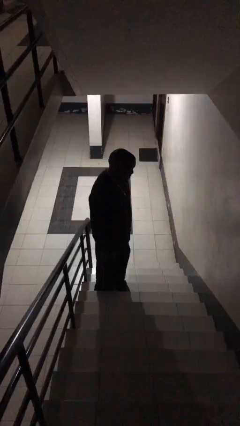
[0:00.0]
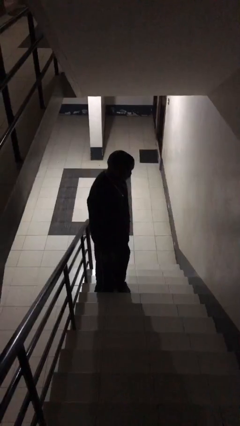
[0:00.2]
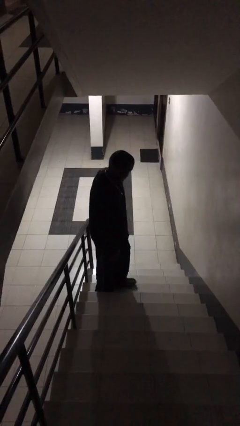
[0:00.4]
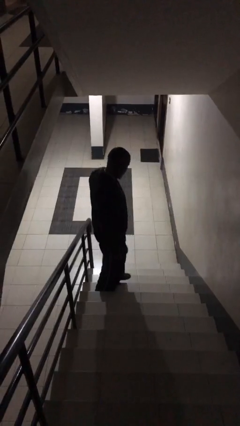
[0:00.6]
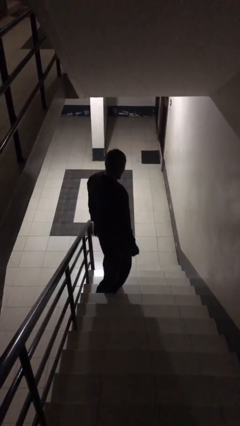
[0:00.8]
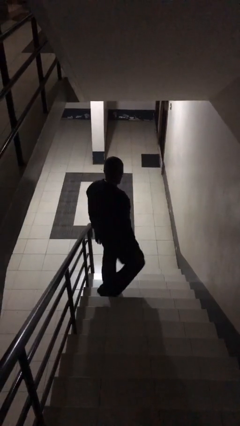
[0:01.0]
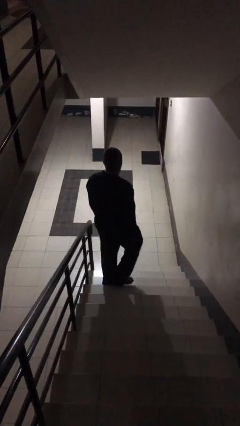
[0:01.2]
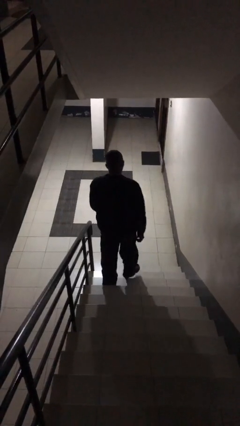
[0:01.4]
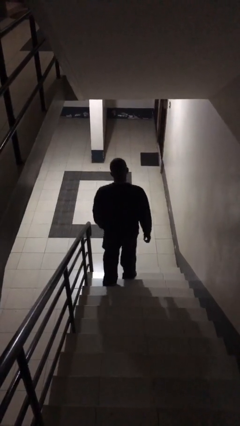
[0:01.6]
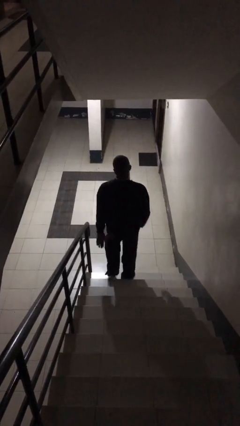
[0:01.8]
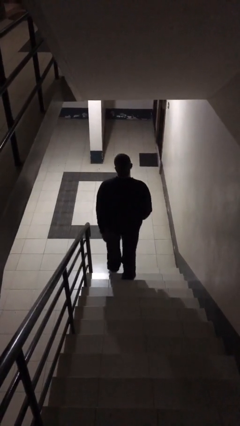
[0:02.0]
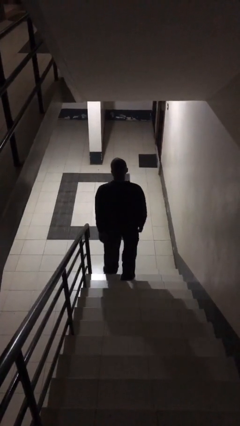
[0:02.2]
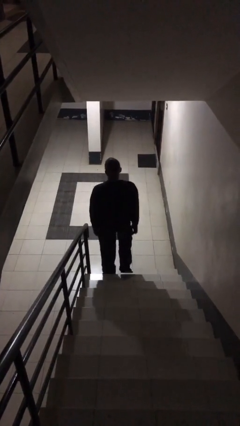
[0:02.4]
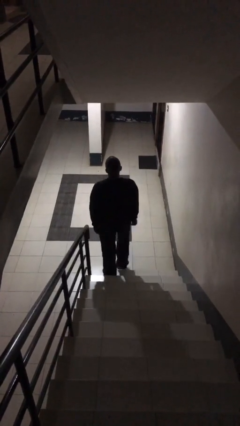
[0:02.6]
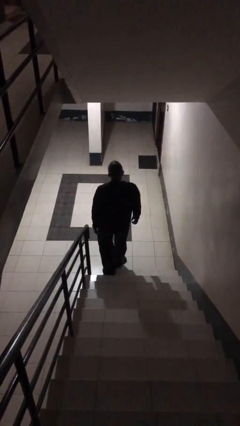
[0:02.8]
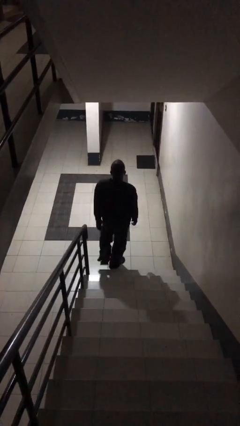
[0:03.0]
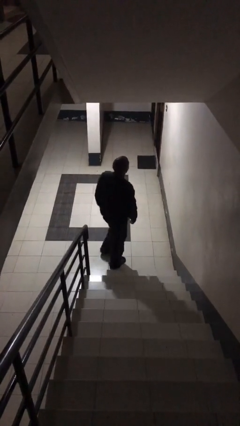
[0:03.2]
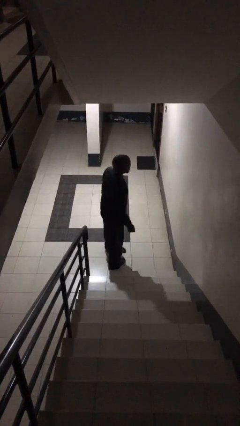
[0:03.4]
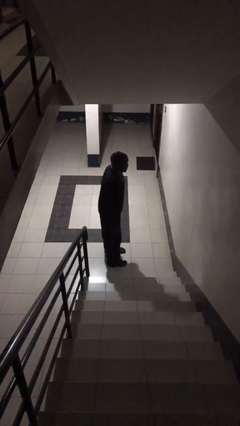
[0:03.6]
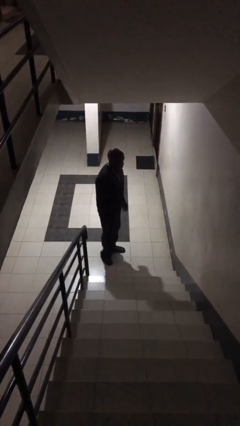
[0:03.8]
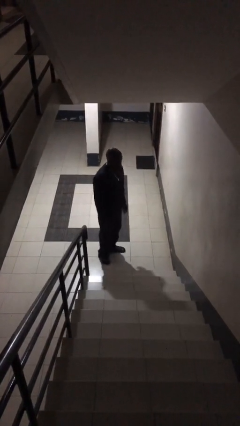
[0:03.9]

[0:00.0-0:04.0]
person climbs down stairs

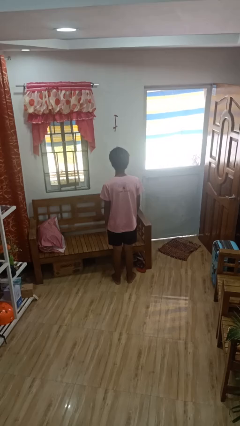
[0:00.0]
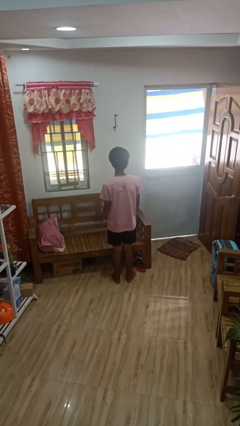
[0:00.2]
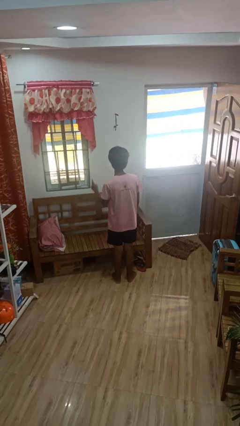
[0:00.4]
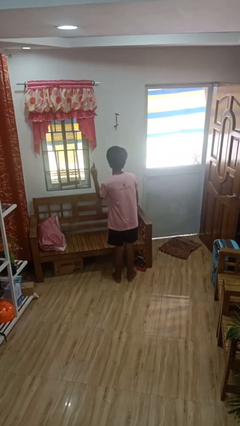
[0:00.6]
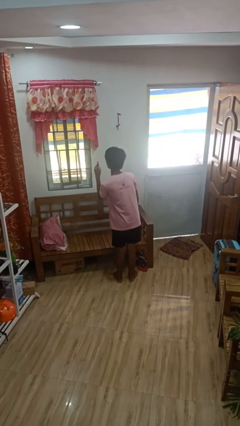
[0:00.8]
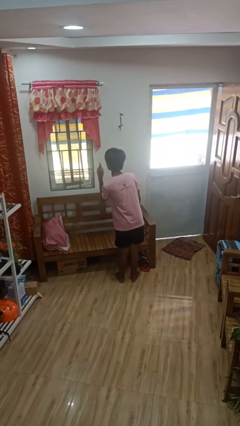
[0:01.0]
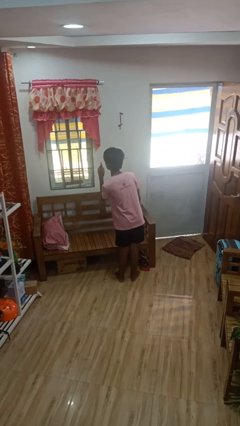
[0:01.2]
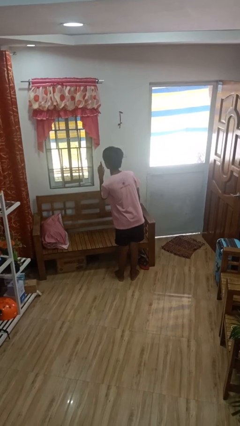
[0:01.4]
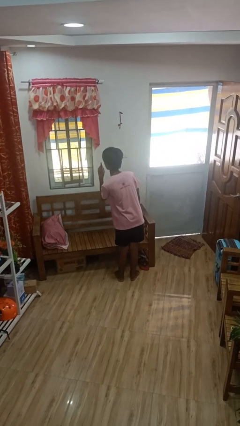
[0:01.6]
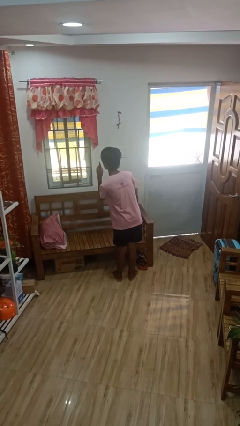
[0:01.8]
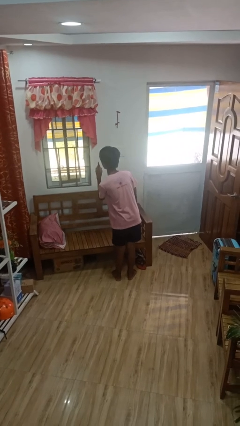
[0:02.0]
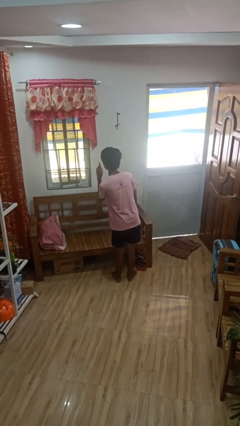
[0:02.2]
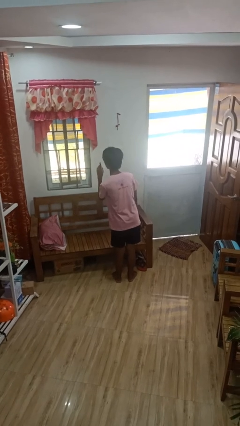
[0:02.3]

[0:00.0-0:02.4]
person gestures be quiet

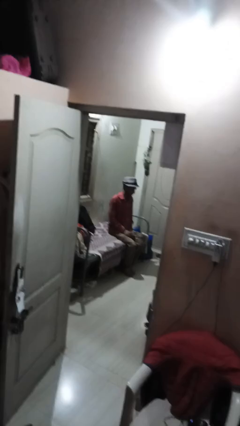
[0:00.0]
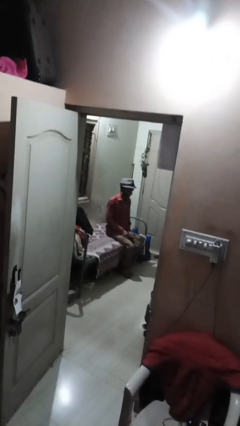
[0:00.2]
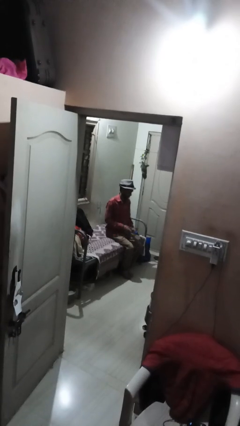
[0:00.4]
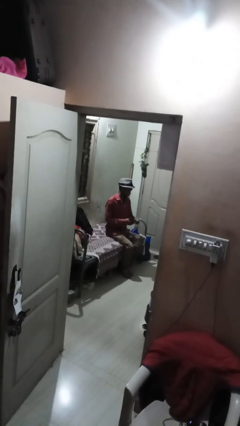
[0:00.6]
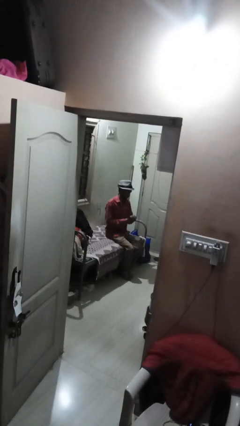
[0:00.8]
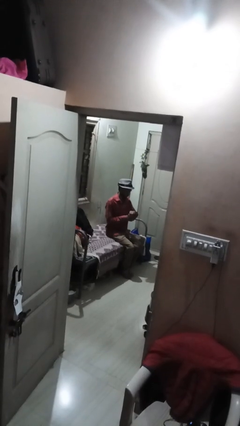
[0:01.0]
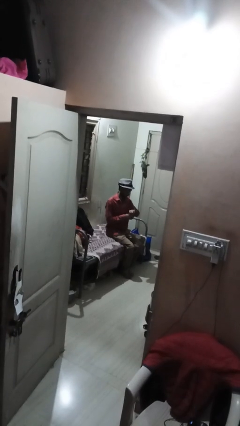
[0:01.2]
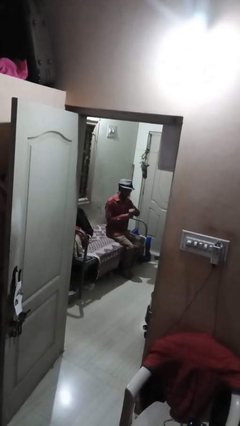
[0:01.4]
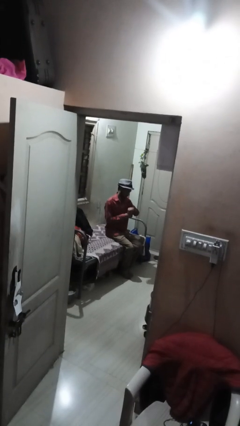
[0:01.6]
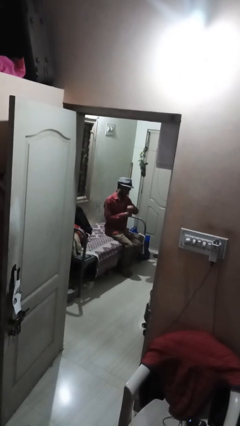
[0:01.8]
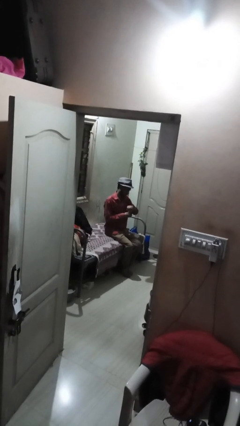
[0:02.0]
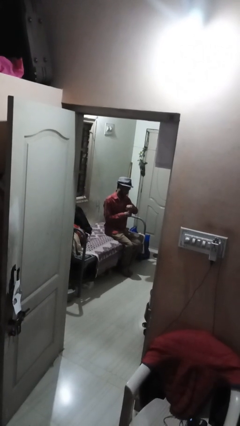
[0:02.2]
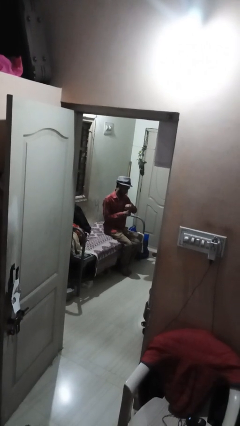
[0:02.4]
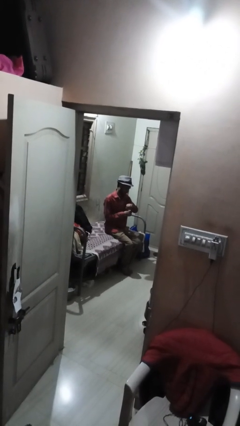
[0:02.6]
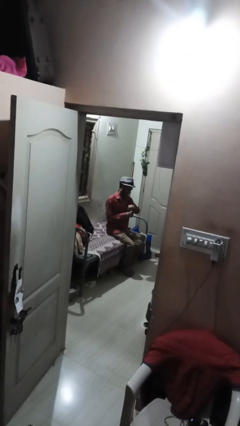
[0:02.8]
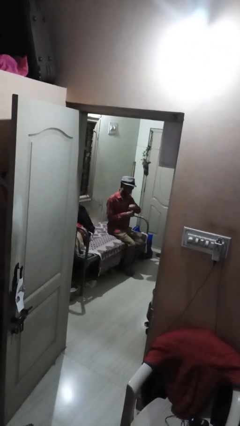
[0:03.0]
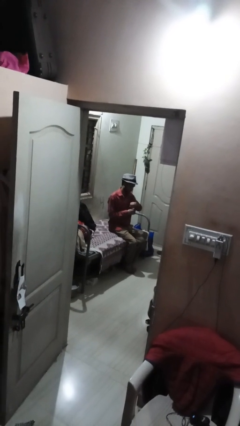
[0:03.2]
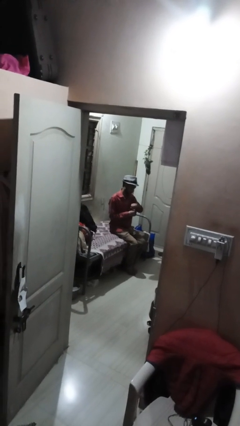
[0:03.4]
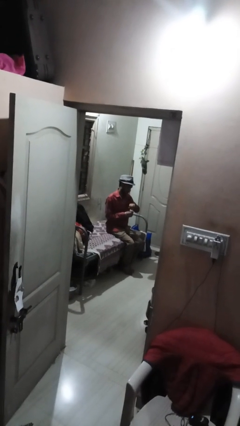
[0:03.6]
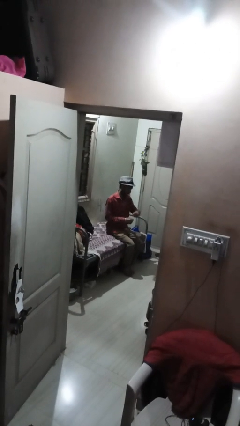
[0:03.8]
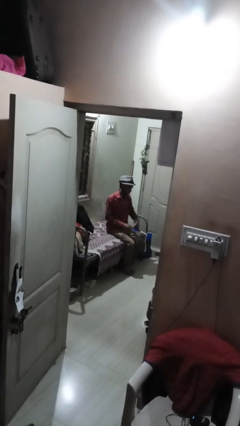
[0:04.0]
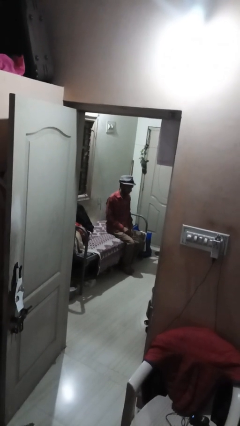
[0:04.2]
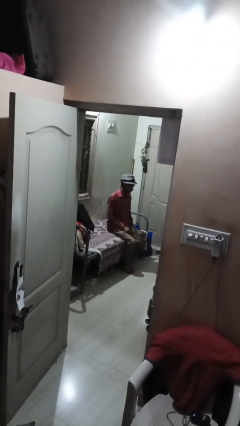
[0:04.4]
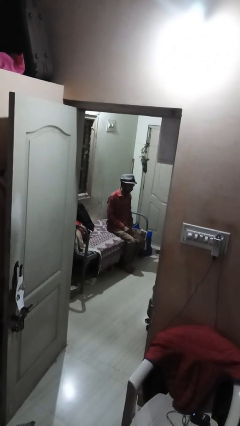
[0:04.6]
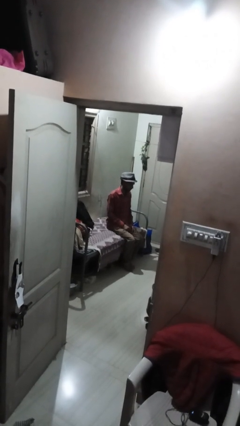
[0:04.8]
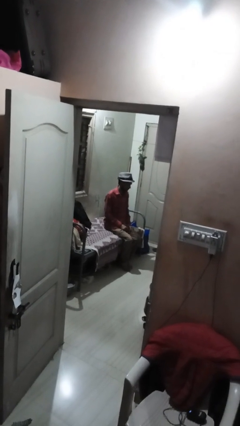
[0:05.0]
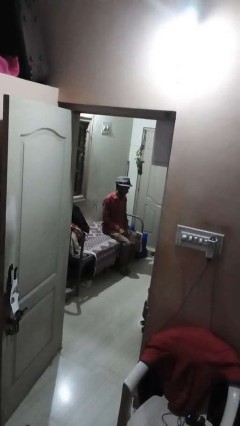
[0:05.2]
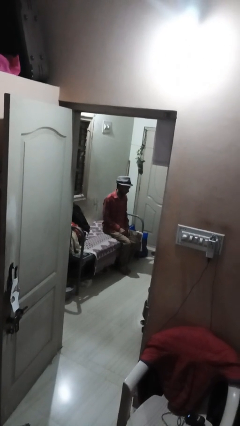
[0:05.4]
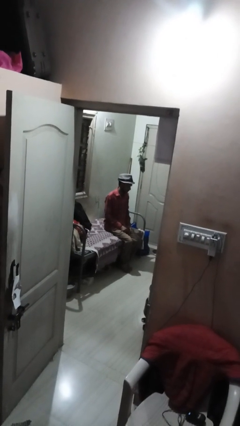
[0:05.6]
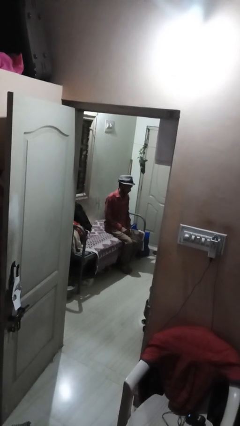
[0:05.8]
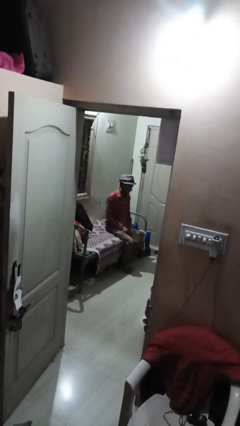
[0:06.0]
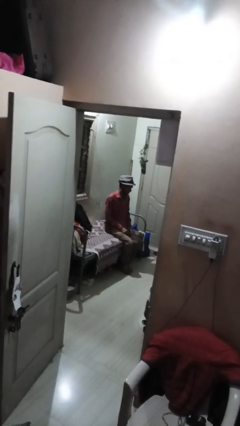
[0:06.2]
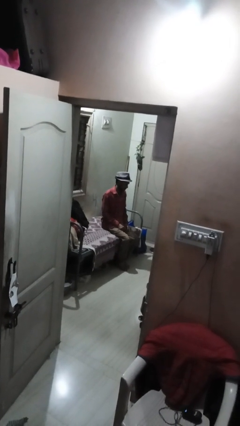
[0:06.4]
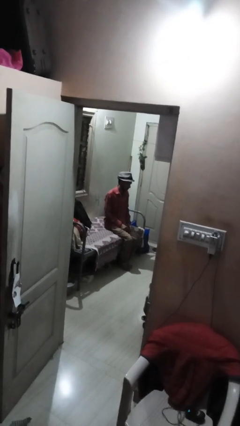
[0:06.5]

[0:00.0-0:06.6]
person looks at wristwatch

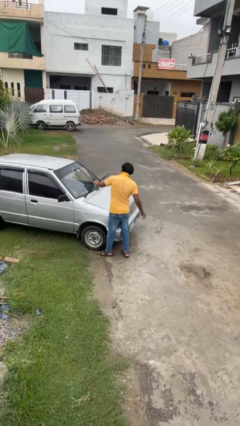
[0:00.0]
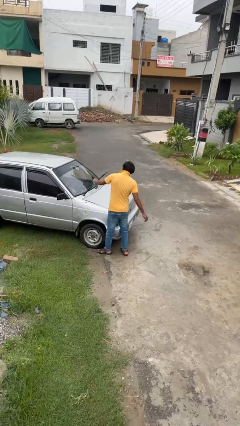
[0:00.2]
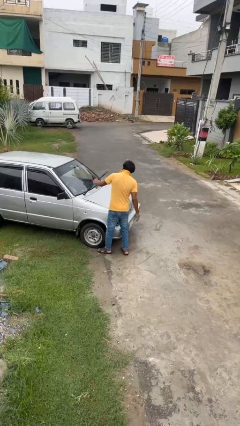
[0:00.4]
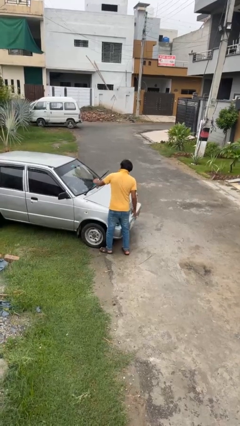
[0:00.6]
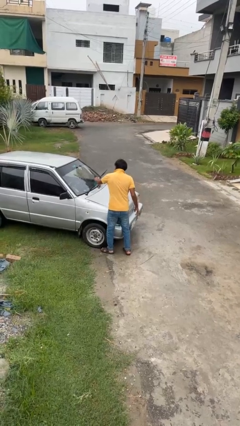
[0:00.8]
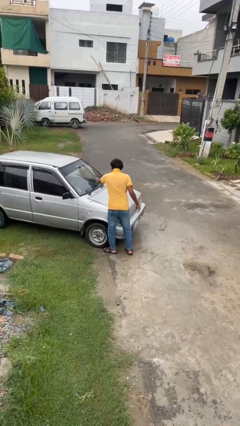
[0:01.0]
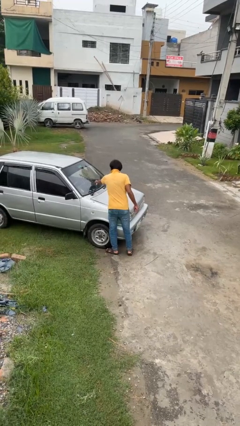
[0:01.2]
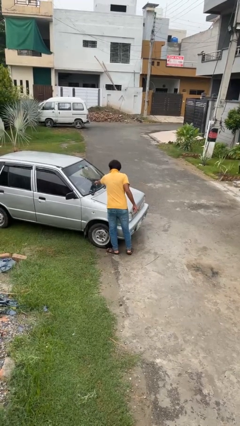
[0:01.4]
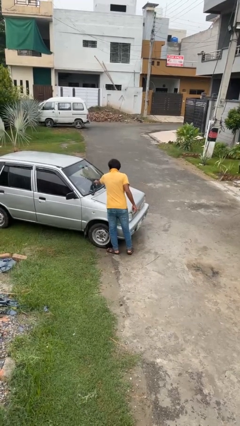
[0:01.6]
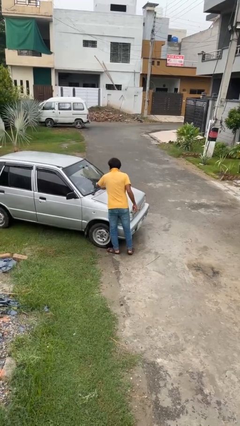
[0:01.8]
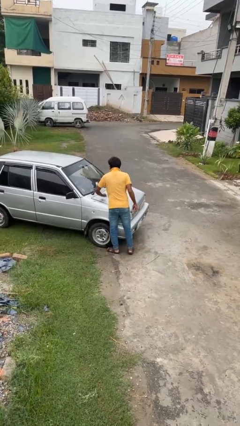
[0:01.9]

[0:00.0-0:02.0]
person flips down car wipers

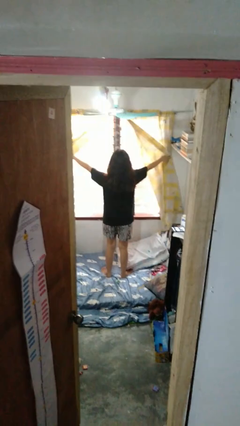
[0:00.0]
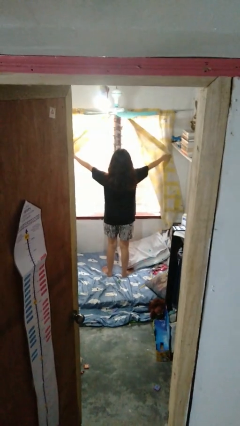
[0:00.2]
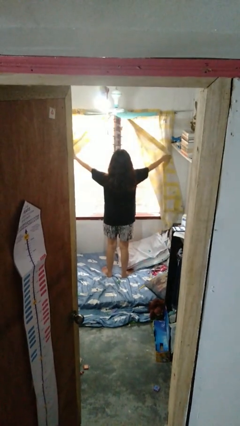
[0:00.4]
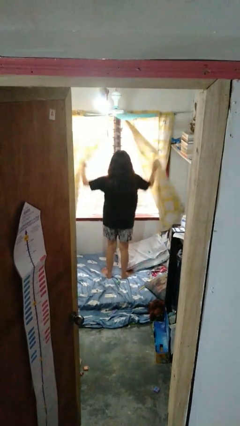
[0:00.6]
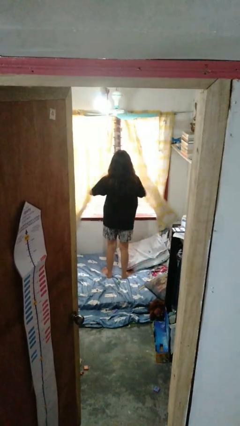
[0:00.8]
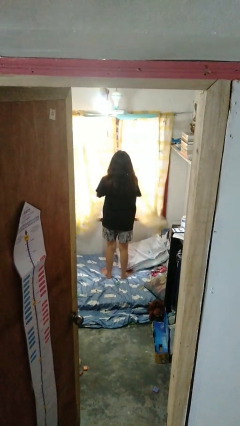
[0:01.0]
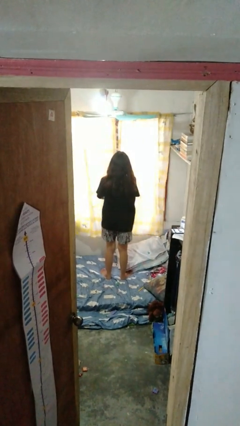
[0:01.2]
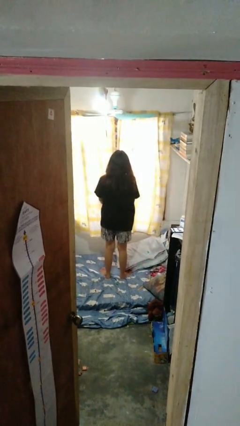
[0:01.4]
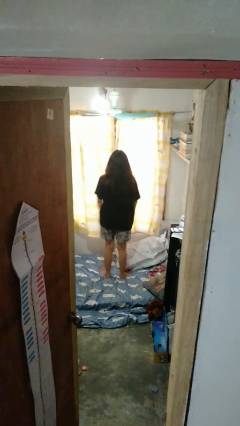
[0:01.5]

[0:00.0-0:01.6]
person closes curtains

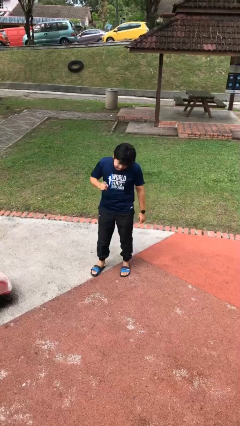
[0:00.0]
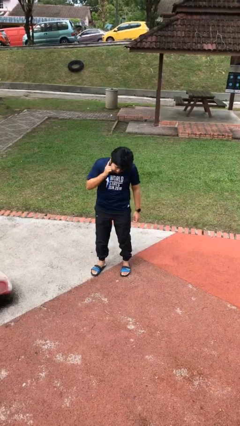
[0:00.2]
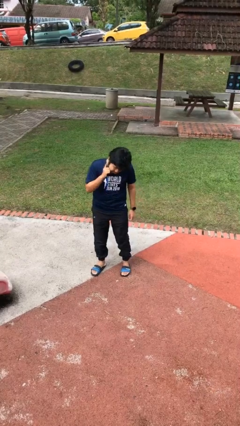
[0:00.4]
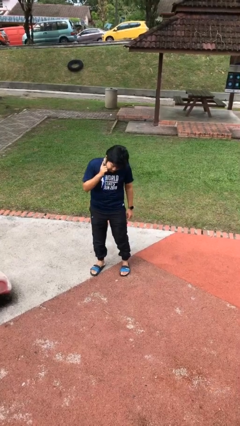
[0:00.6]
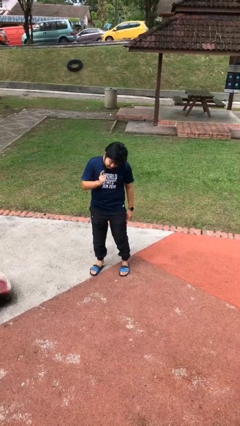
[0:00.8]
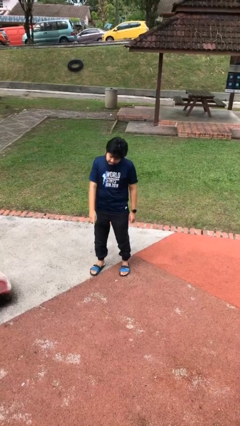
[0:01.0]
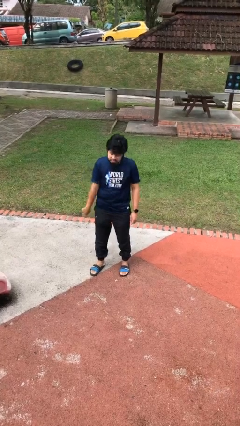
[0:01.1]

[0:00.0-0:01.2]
person gestures listen closely
